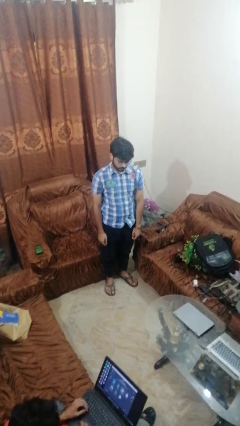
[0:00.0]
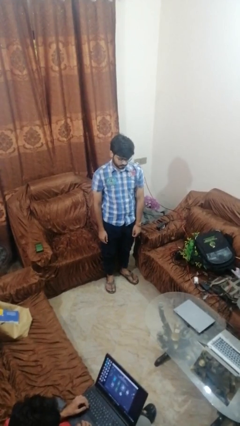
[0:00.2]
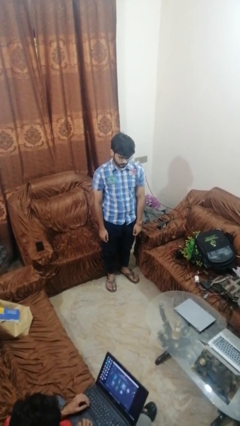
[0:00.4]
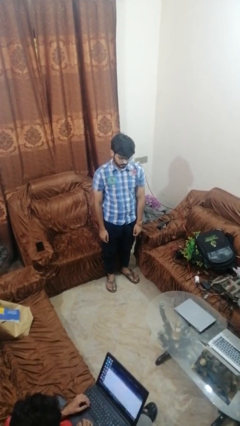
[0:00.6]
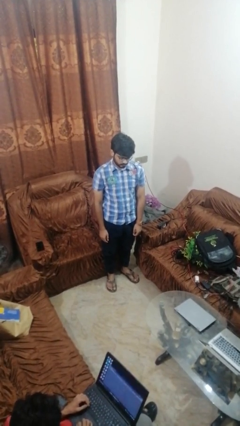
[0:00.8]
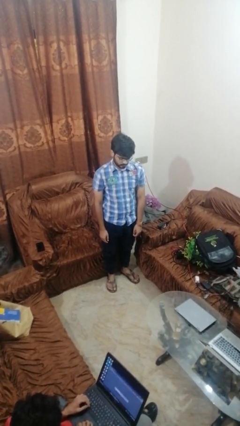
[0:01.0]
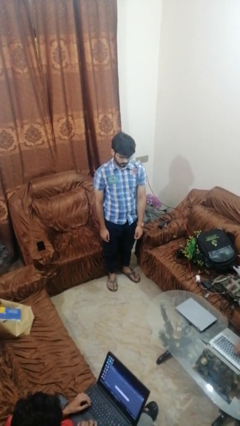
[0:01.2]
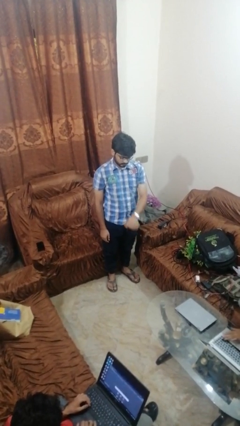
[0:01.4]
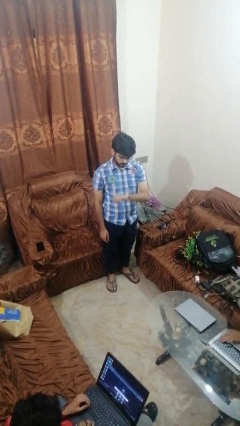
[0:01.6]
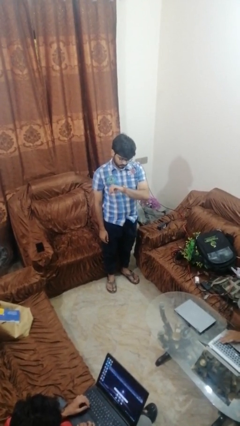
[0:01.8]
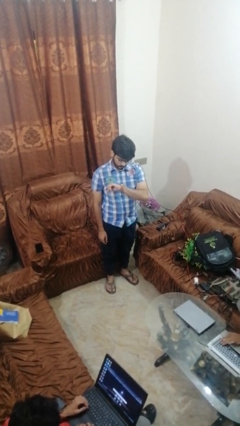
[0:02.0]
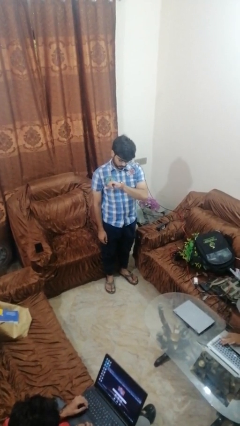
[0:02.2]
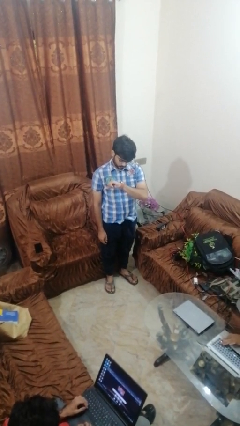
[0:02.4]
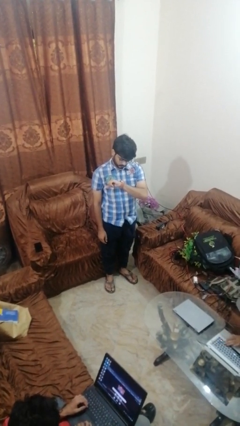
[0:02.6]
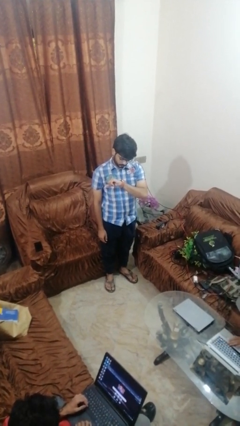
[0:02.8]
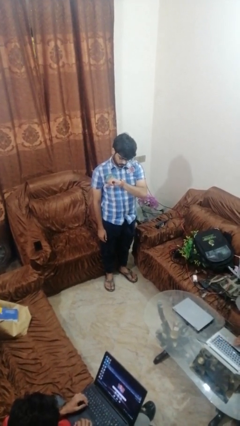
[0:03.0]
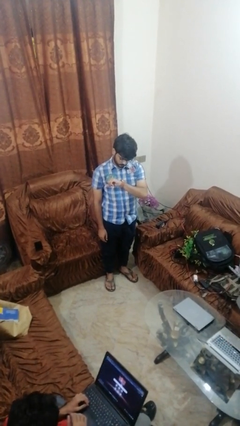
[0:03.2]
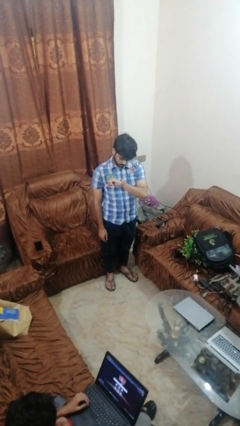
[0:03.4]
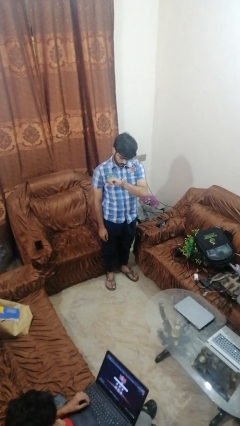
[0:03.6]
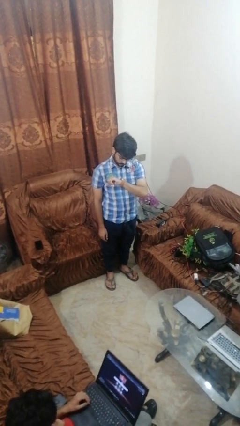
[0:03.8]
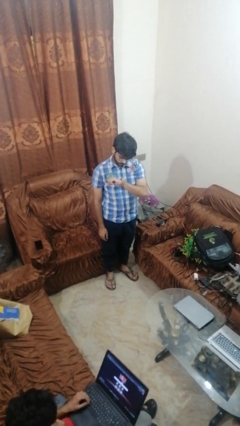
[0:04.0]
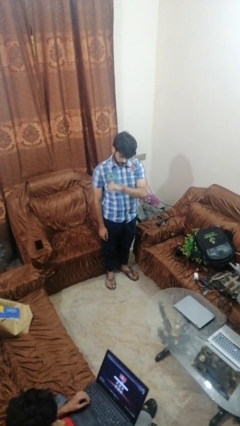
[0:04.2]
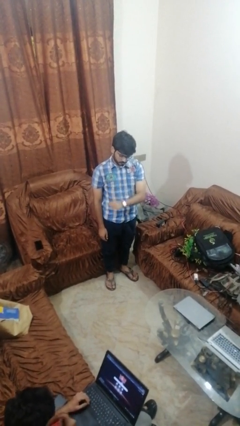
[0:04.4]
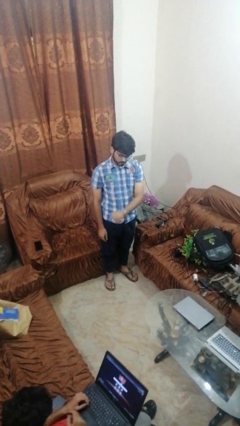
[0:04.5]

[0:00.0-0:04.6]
person looks at wristwatch

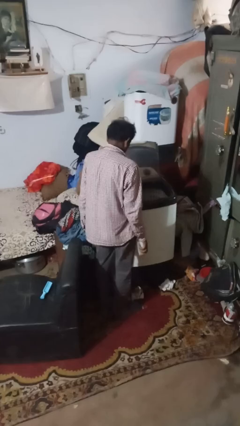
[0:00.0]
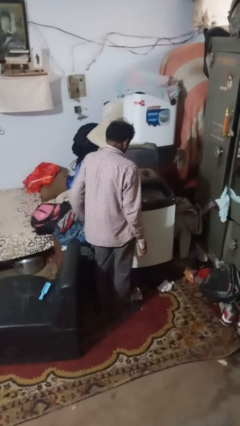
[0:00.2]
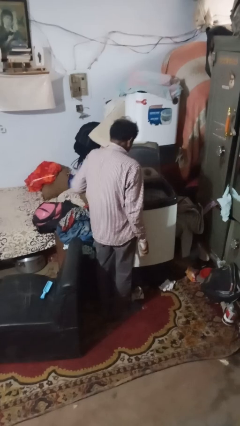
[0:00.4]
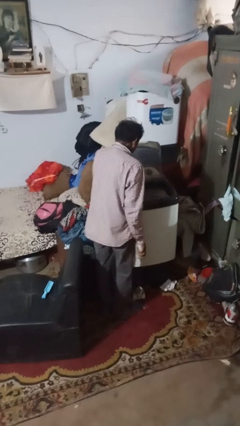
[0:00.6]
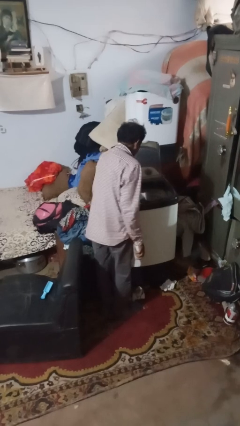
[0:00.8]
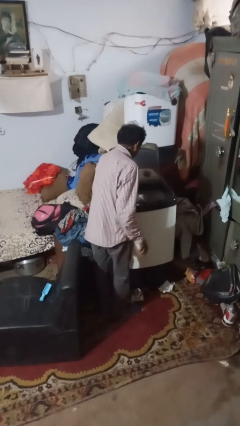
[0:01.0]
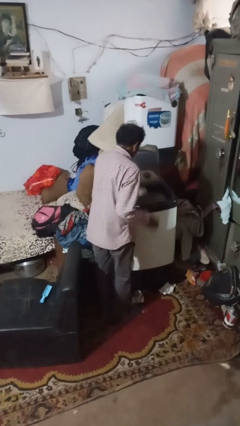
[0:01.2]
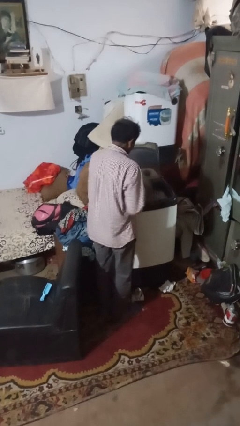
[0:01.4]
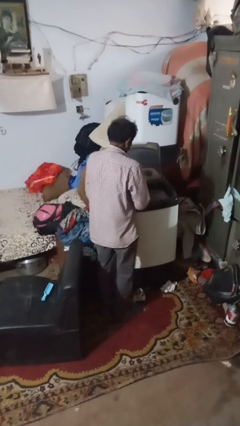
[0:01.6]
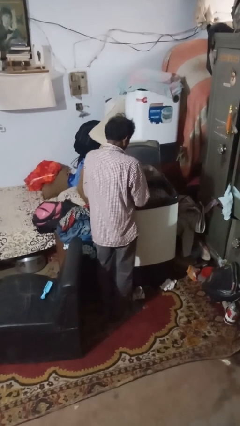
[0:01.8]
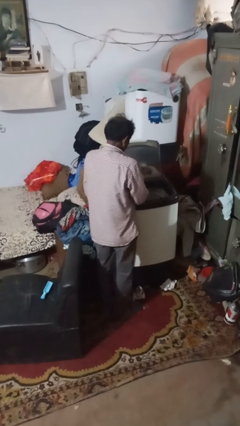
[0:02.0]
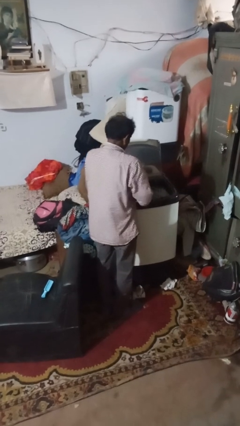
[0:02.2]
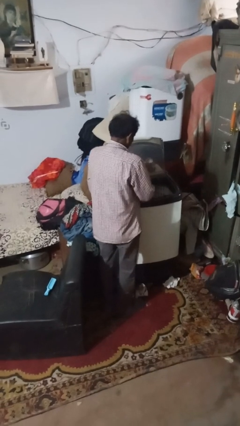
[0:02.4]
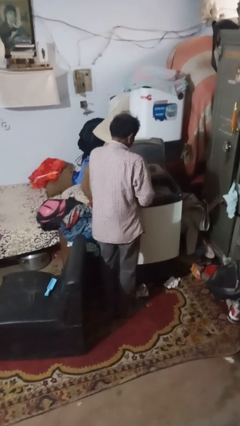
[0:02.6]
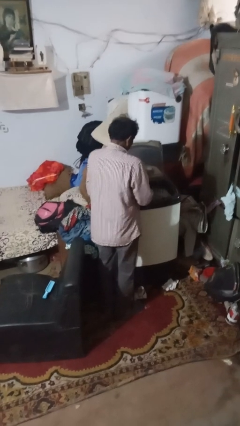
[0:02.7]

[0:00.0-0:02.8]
person cleans dryer lint trap

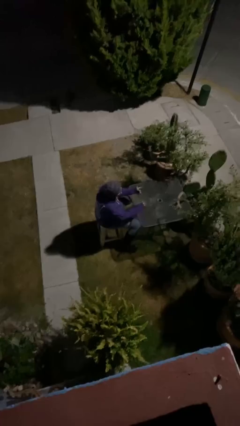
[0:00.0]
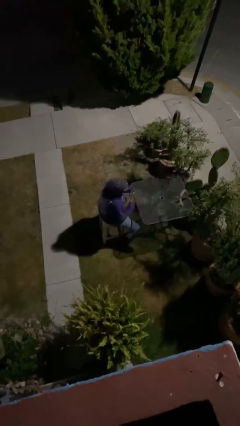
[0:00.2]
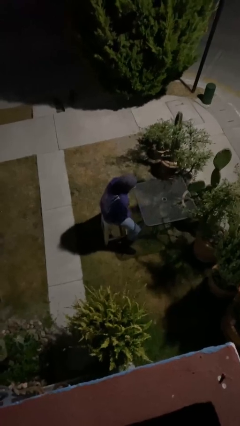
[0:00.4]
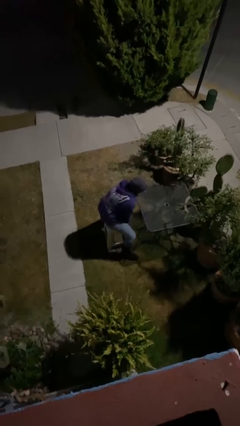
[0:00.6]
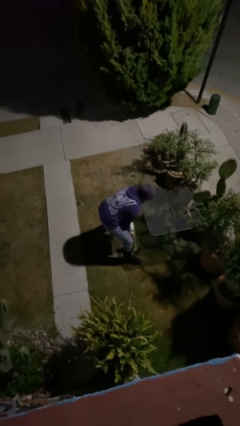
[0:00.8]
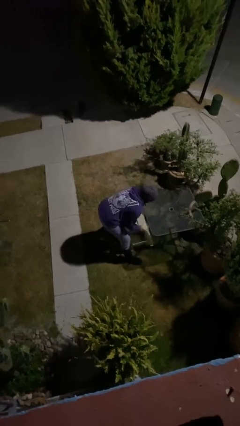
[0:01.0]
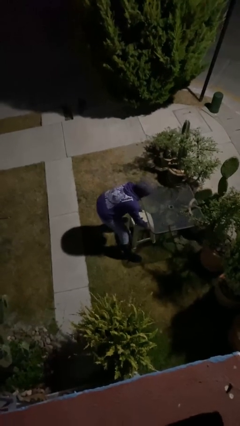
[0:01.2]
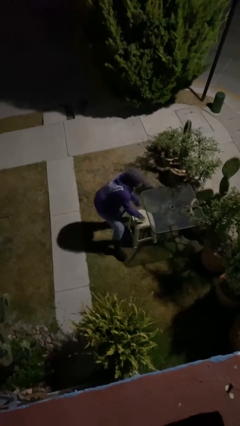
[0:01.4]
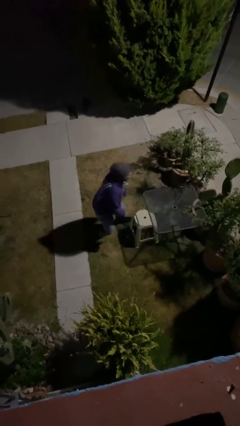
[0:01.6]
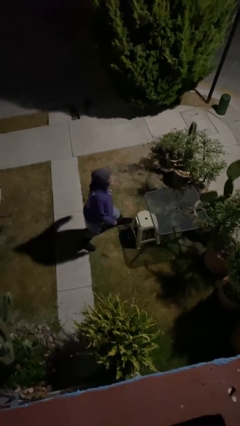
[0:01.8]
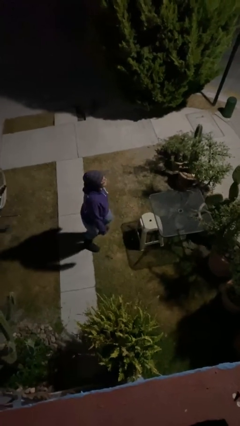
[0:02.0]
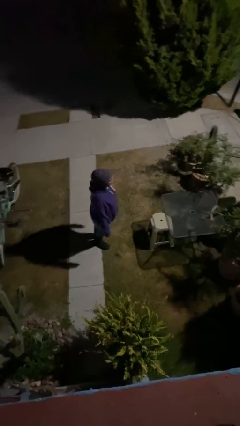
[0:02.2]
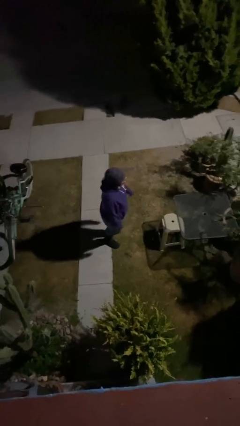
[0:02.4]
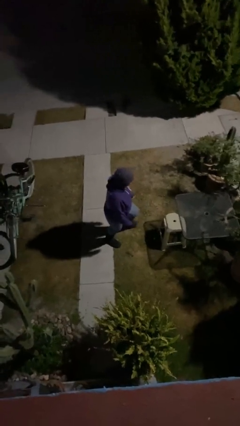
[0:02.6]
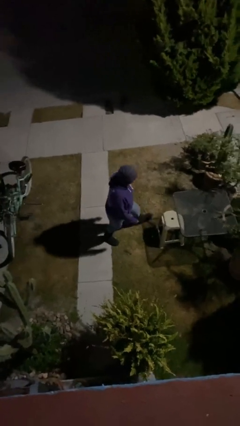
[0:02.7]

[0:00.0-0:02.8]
person stands up

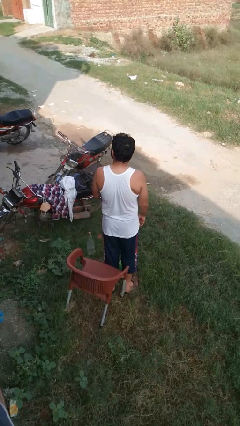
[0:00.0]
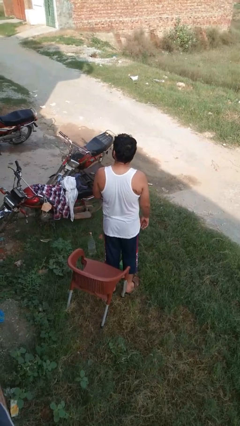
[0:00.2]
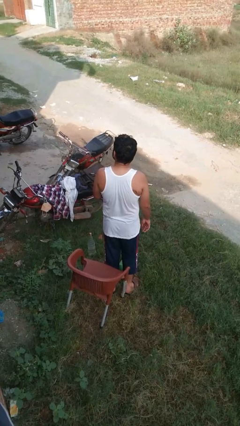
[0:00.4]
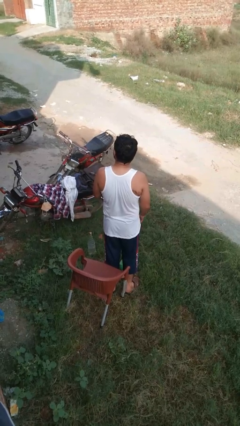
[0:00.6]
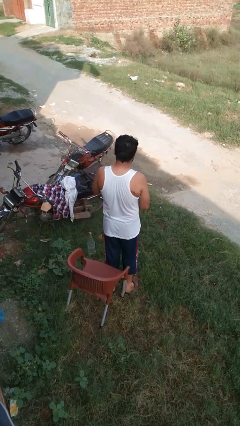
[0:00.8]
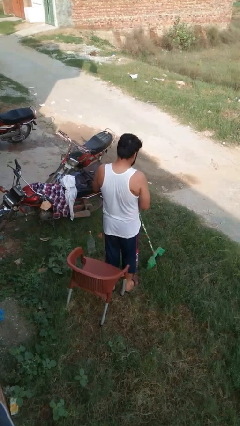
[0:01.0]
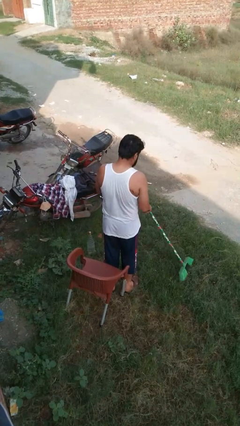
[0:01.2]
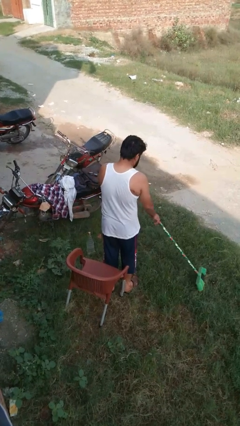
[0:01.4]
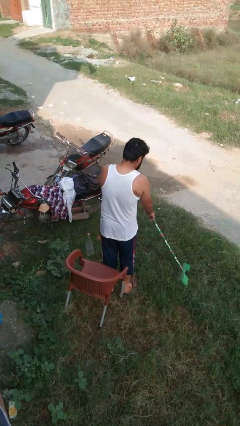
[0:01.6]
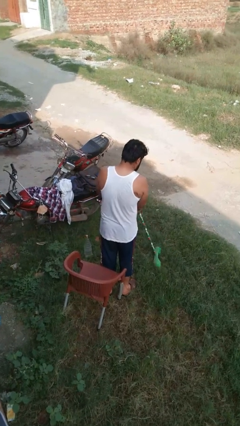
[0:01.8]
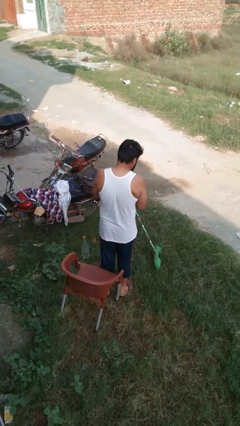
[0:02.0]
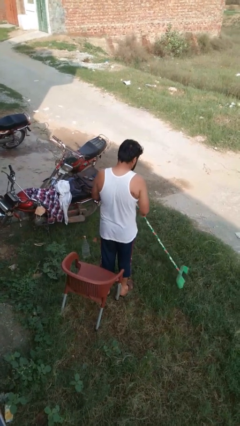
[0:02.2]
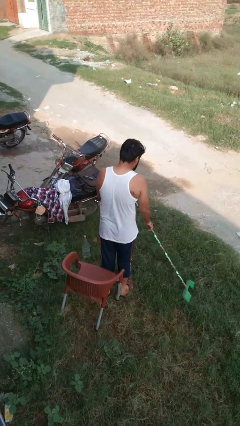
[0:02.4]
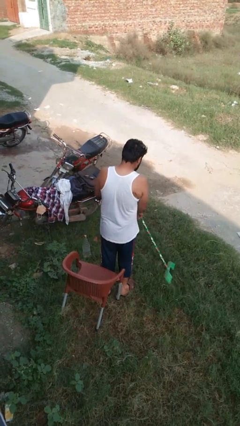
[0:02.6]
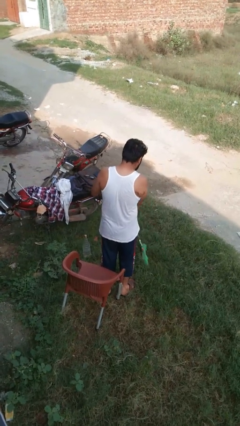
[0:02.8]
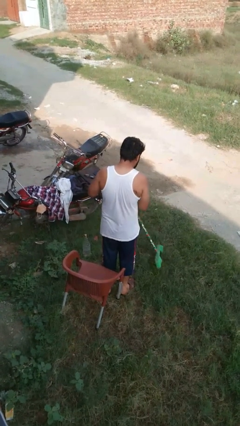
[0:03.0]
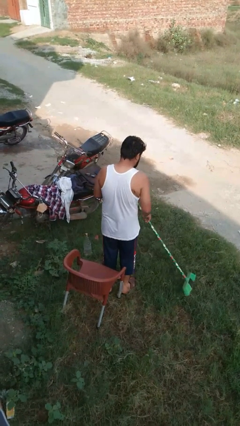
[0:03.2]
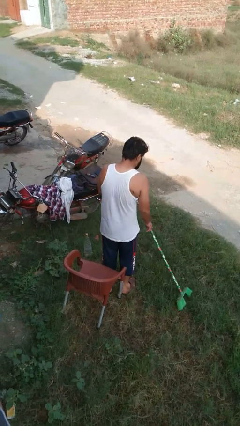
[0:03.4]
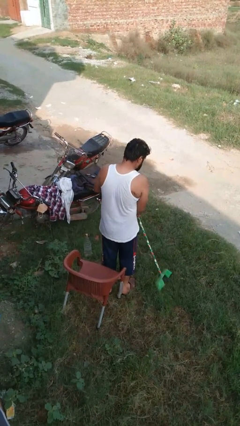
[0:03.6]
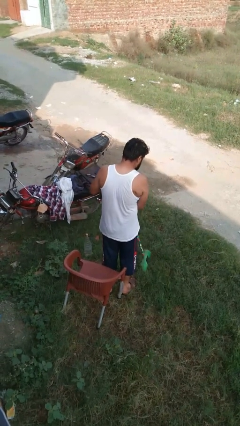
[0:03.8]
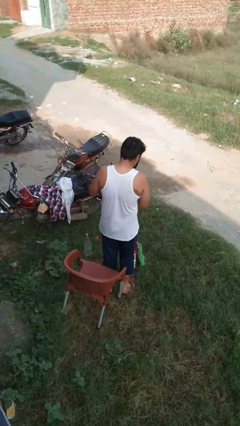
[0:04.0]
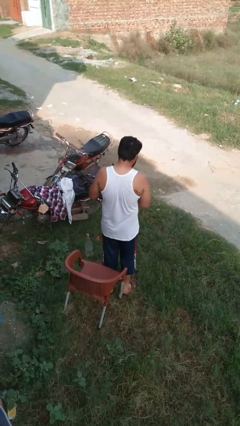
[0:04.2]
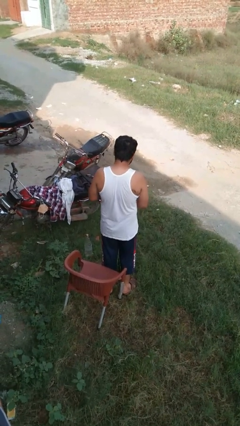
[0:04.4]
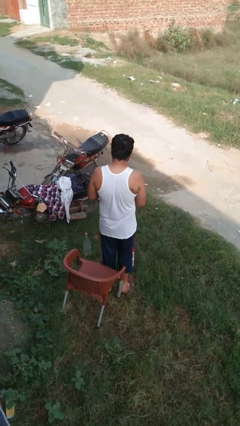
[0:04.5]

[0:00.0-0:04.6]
person sweeps floor

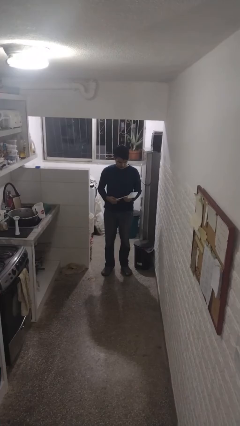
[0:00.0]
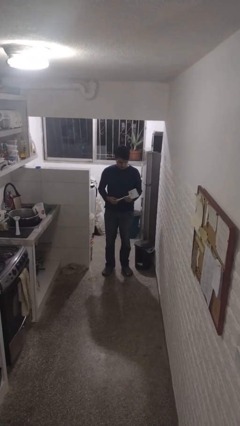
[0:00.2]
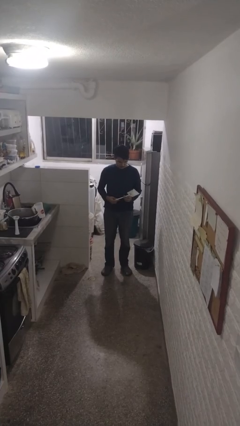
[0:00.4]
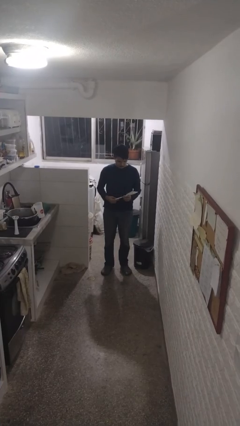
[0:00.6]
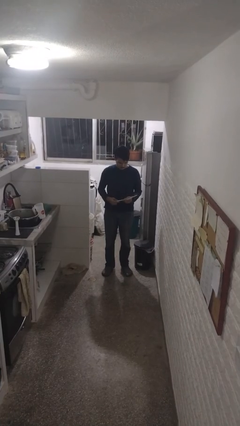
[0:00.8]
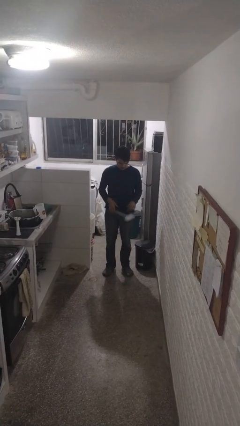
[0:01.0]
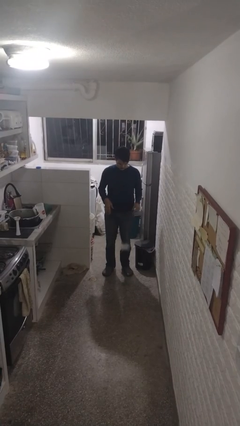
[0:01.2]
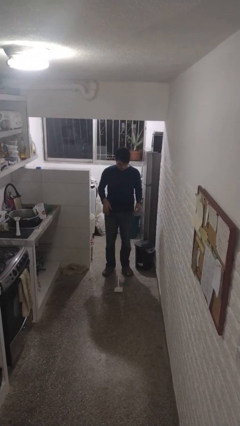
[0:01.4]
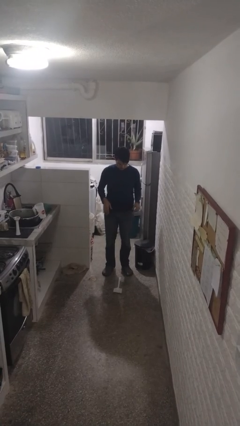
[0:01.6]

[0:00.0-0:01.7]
person drops object

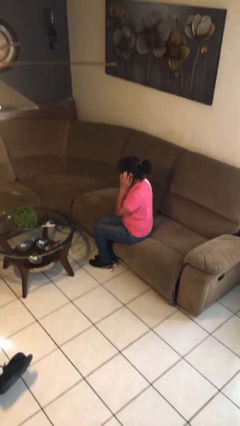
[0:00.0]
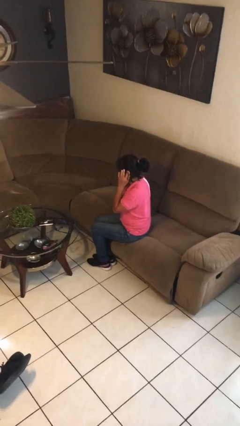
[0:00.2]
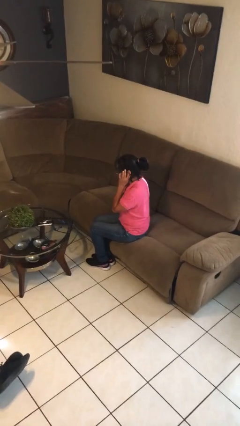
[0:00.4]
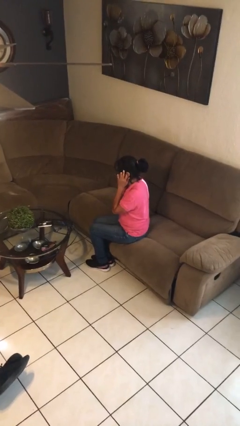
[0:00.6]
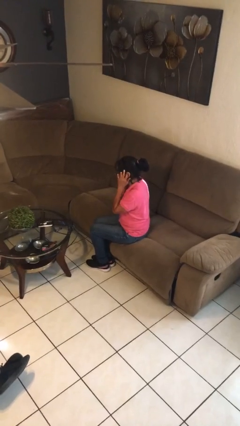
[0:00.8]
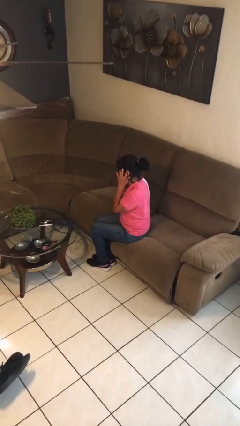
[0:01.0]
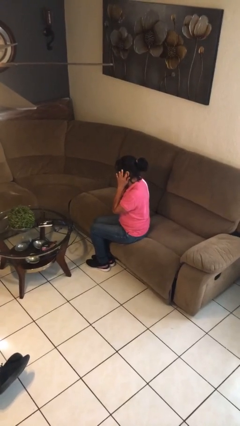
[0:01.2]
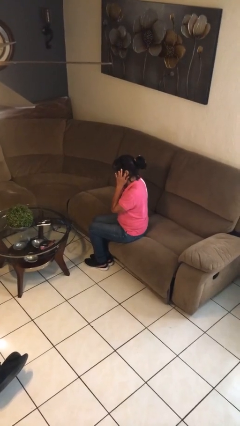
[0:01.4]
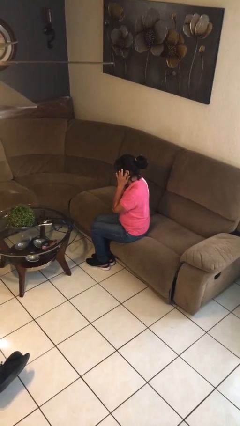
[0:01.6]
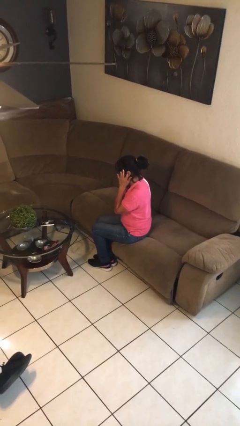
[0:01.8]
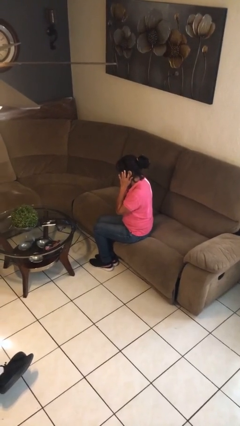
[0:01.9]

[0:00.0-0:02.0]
person puts fingers in ear
